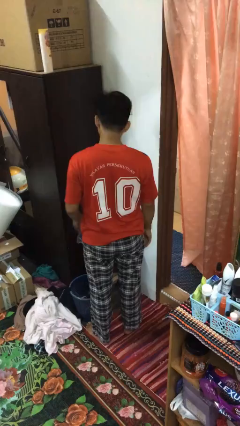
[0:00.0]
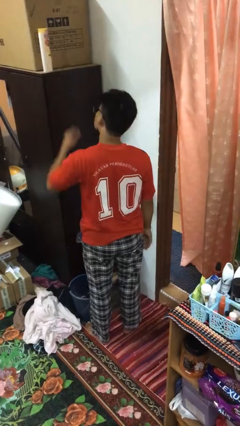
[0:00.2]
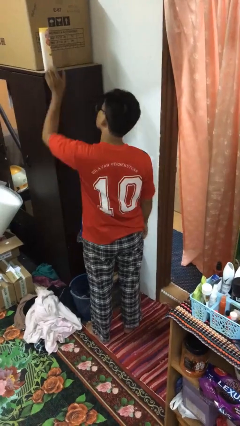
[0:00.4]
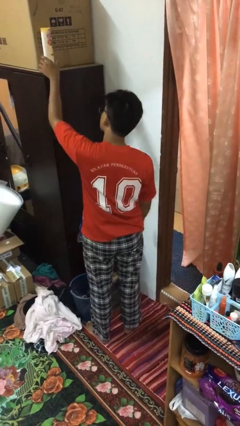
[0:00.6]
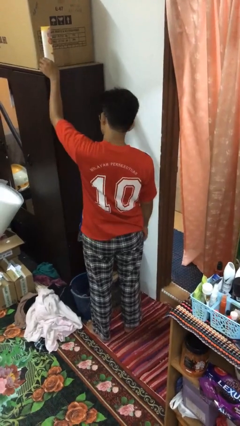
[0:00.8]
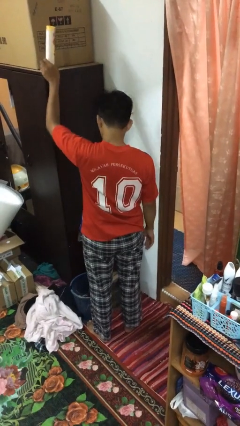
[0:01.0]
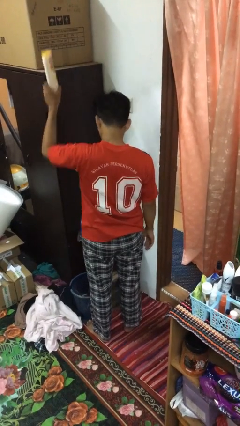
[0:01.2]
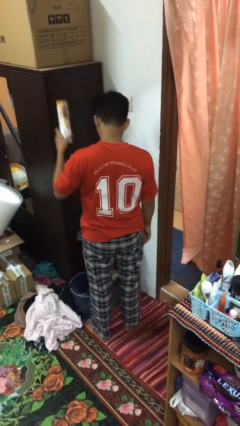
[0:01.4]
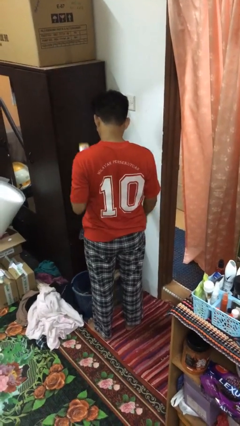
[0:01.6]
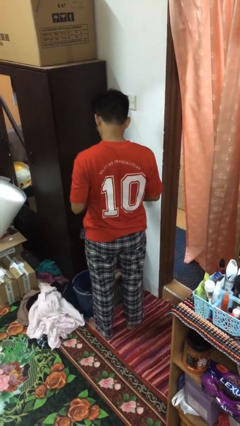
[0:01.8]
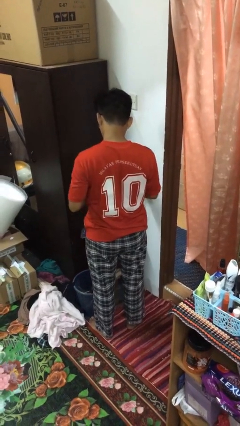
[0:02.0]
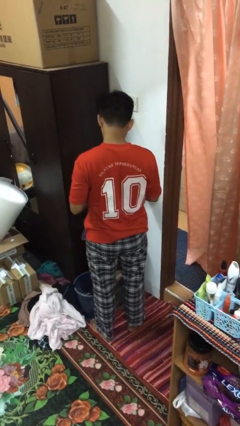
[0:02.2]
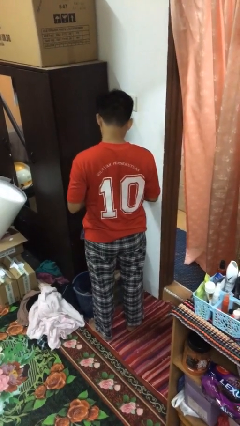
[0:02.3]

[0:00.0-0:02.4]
person picks up object from shelf

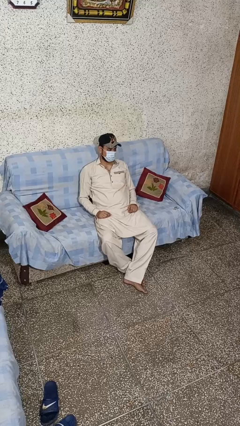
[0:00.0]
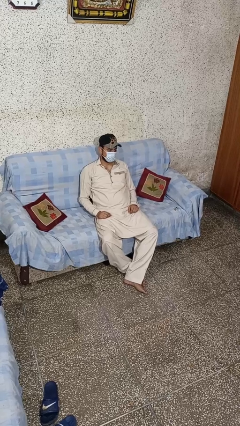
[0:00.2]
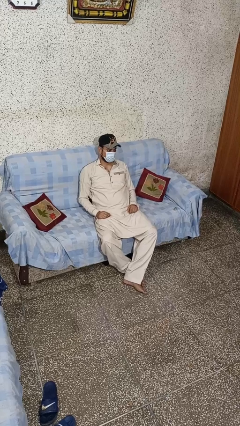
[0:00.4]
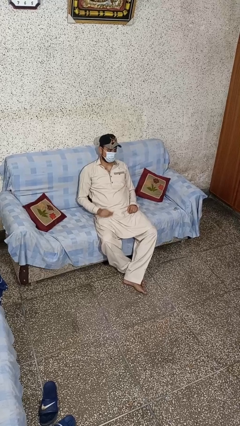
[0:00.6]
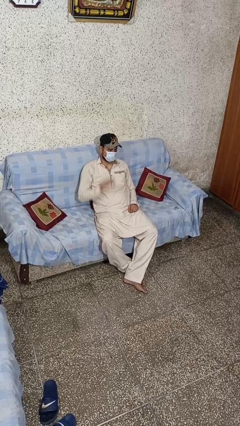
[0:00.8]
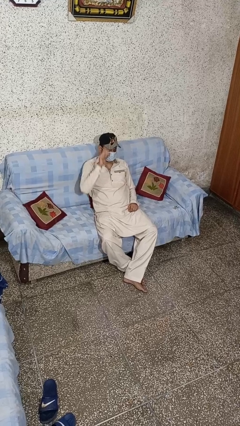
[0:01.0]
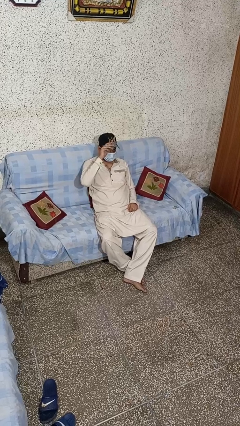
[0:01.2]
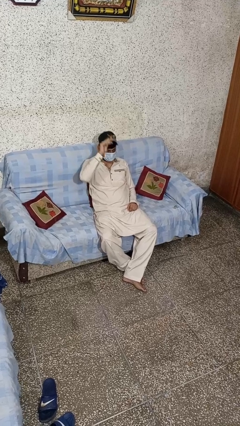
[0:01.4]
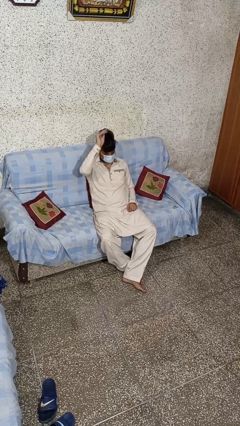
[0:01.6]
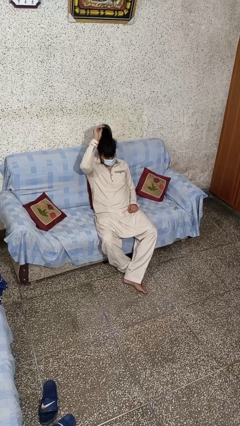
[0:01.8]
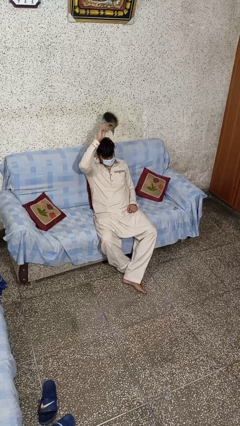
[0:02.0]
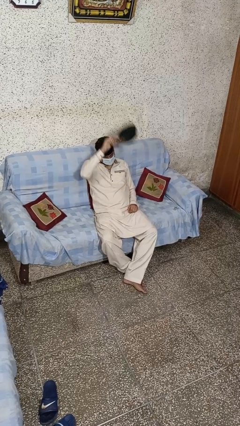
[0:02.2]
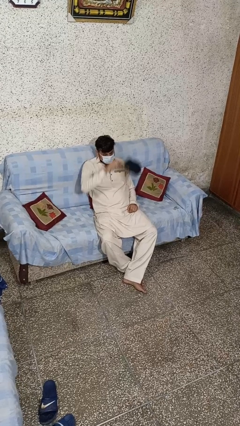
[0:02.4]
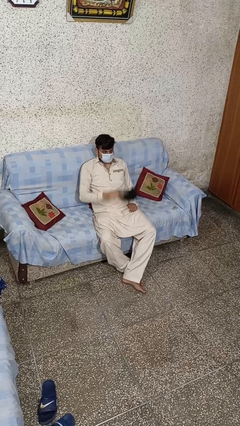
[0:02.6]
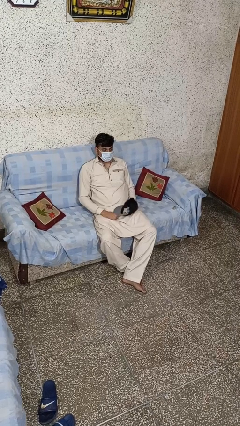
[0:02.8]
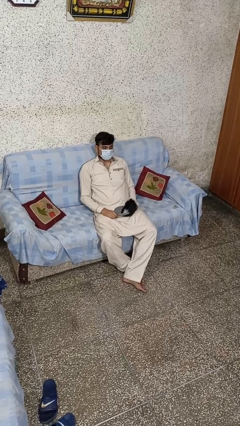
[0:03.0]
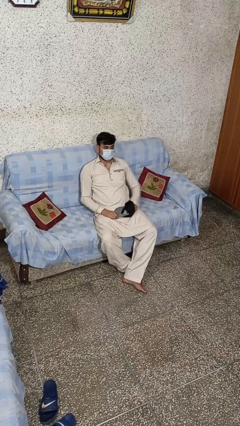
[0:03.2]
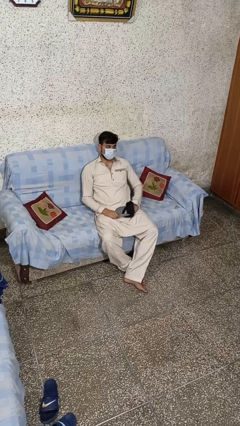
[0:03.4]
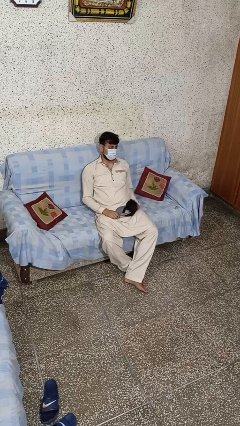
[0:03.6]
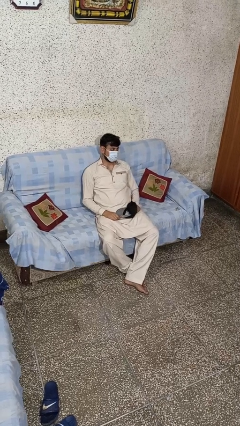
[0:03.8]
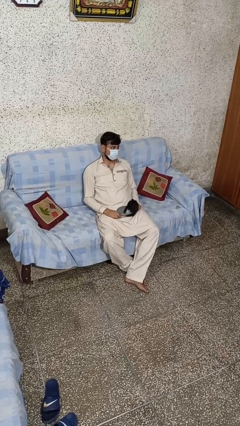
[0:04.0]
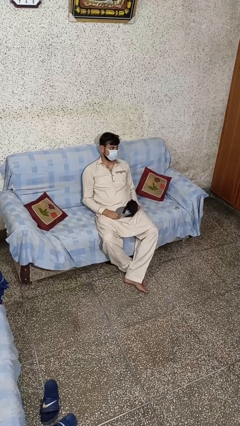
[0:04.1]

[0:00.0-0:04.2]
person takes off hat

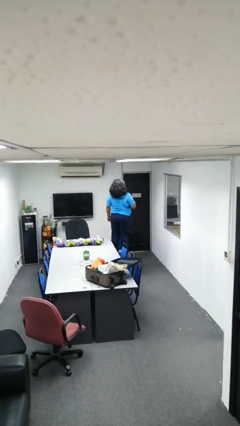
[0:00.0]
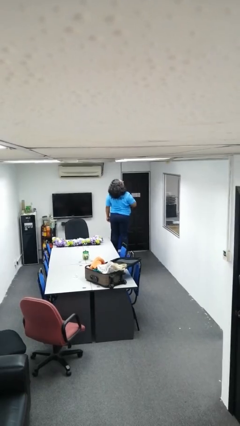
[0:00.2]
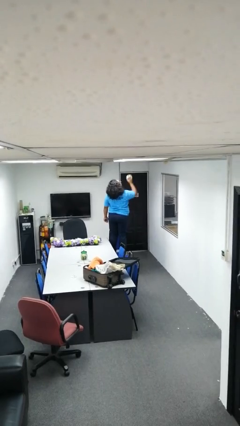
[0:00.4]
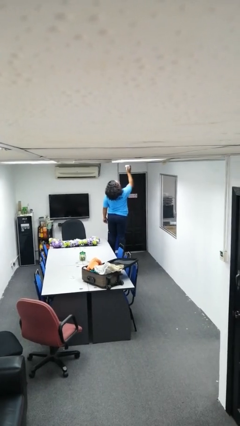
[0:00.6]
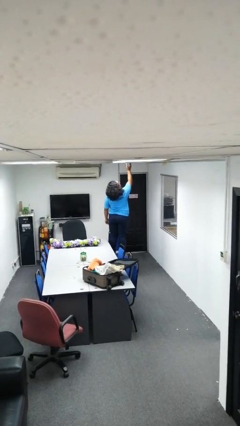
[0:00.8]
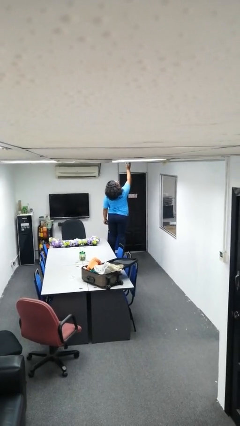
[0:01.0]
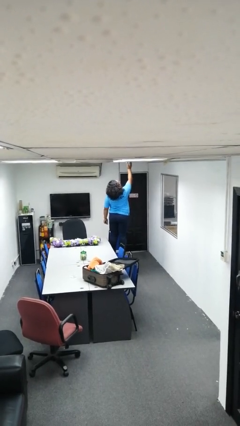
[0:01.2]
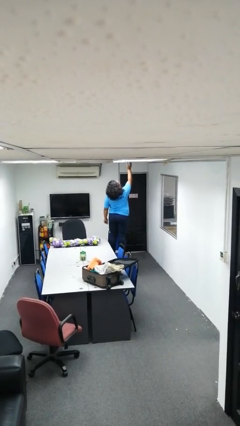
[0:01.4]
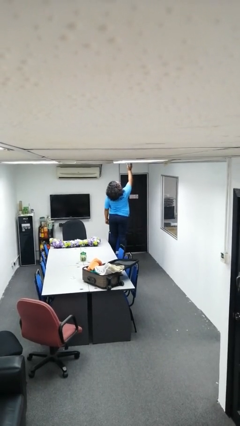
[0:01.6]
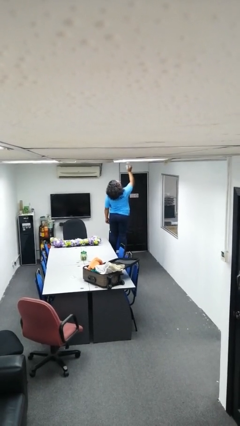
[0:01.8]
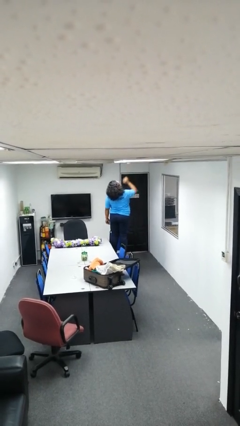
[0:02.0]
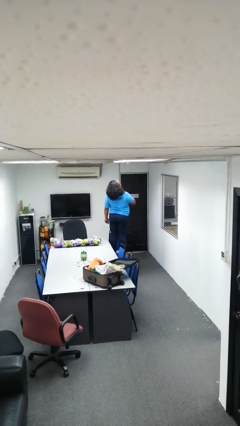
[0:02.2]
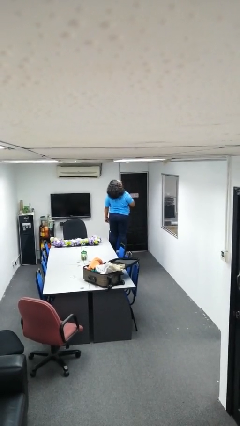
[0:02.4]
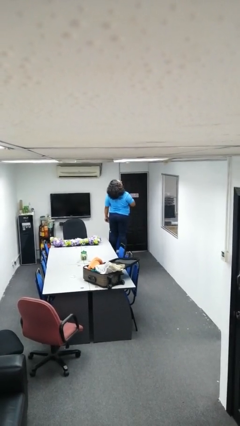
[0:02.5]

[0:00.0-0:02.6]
person puts up smoke detector

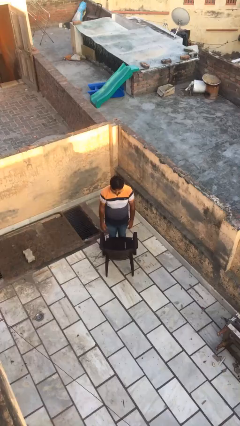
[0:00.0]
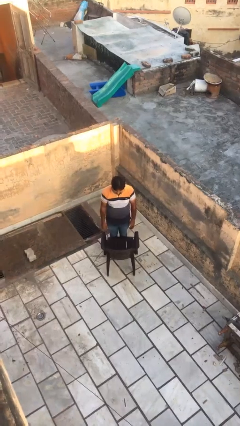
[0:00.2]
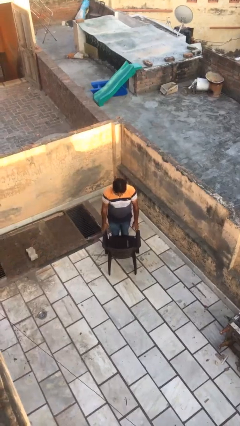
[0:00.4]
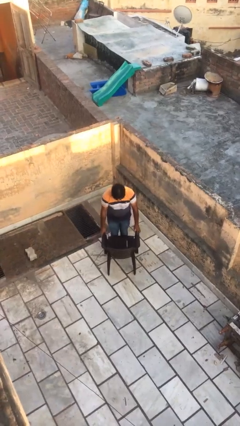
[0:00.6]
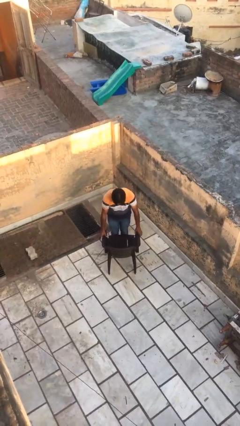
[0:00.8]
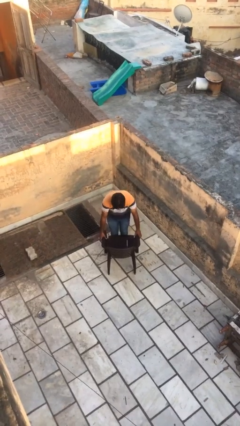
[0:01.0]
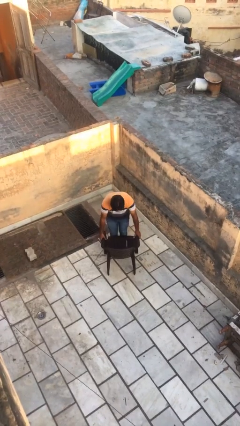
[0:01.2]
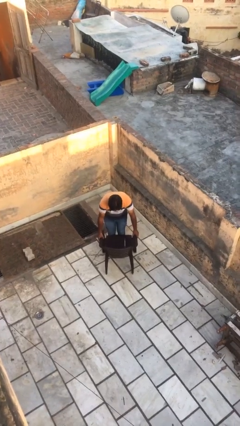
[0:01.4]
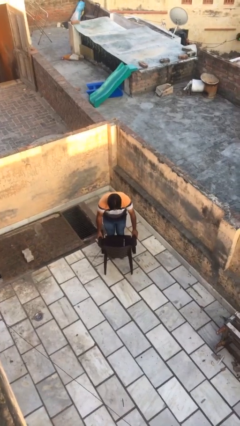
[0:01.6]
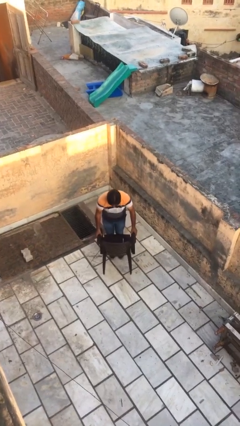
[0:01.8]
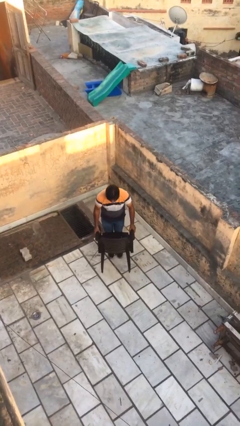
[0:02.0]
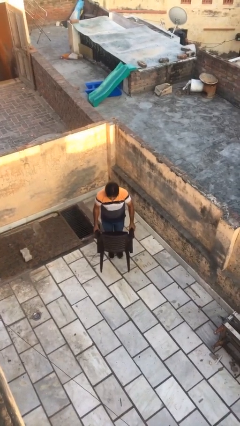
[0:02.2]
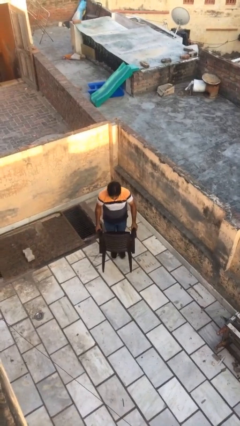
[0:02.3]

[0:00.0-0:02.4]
person picks up object from floor

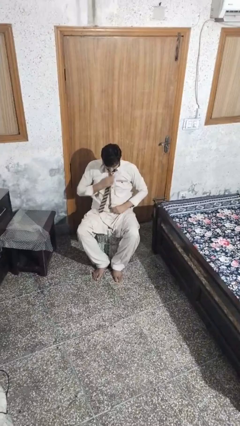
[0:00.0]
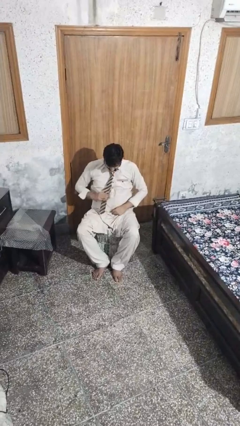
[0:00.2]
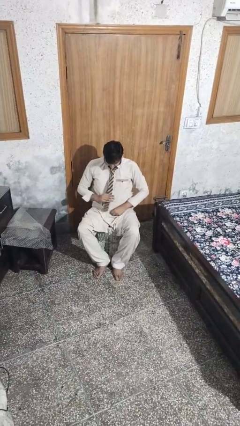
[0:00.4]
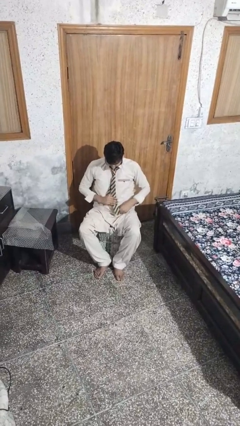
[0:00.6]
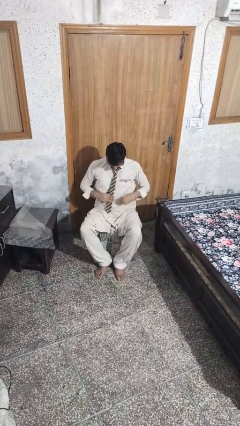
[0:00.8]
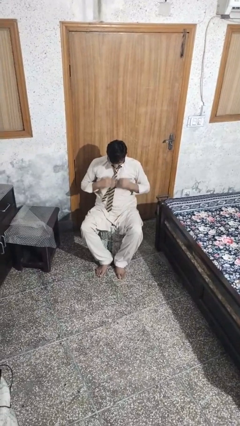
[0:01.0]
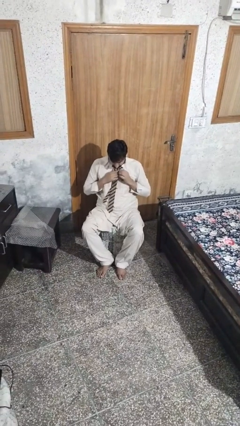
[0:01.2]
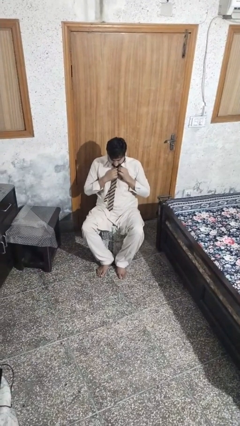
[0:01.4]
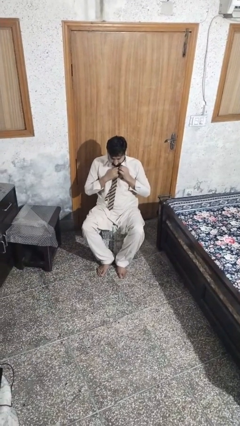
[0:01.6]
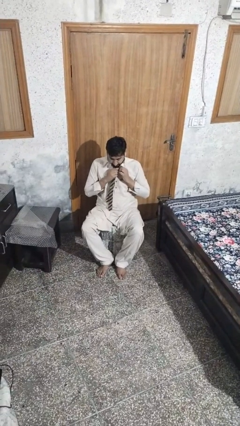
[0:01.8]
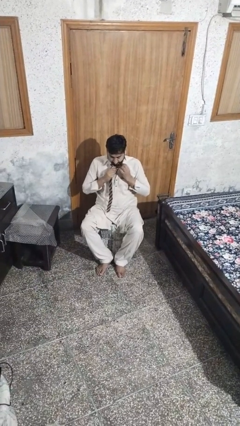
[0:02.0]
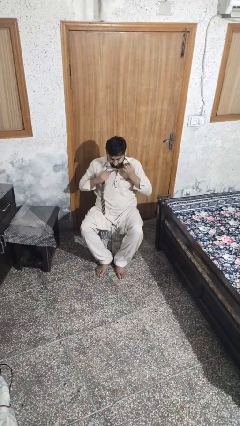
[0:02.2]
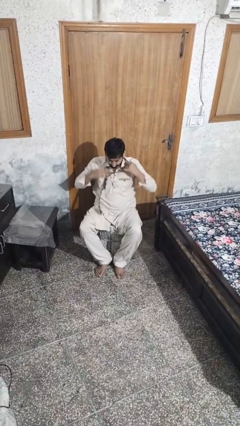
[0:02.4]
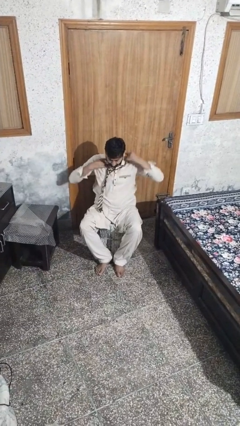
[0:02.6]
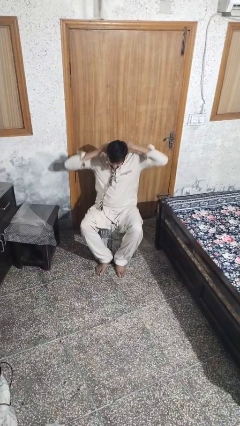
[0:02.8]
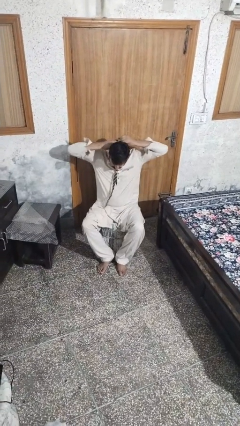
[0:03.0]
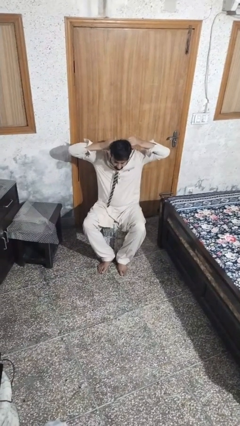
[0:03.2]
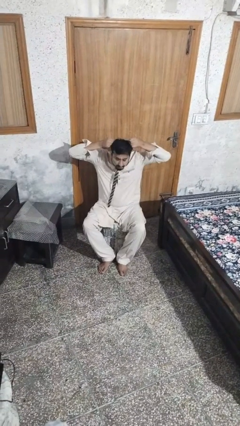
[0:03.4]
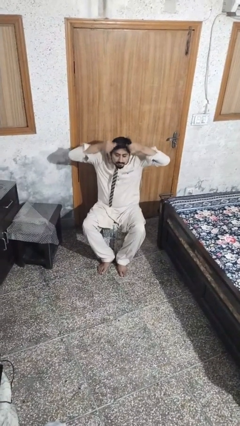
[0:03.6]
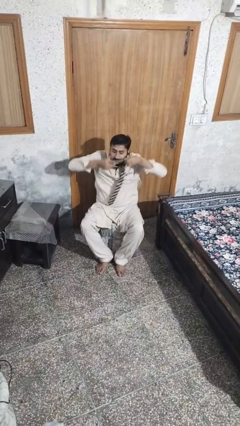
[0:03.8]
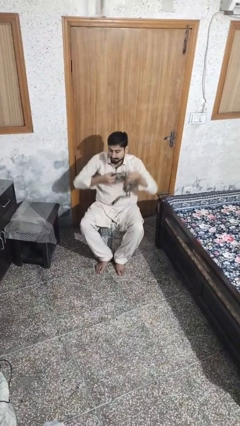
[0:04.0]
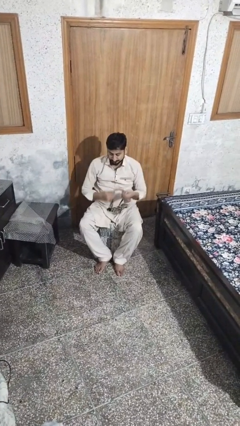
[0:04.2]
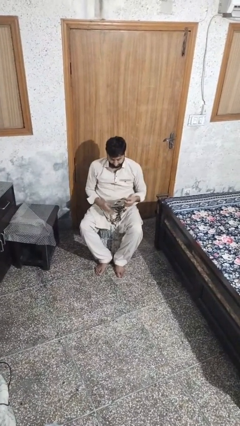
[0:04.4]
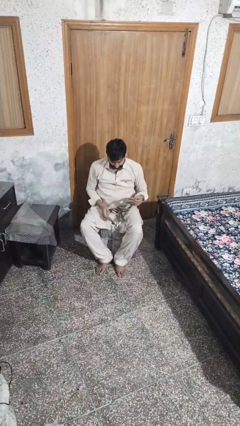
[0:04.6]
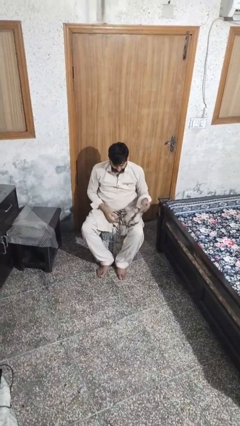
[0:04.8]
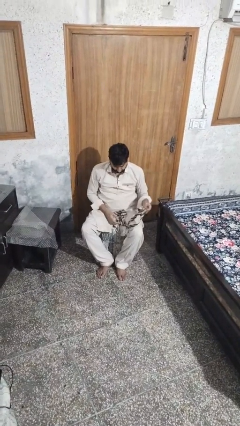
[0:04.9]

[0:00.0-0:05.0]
person takes off necktie

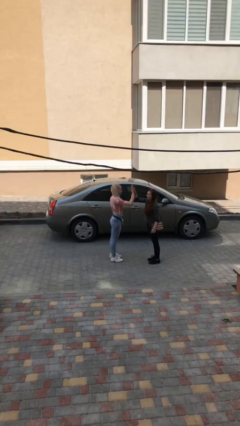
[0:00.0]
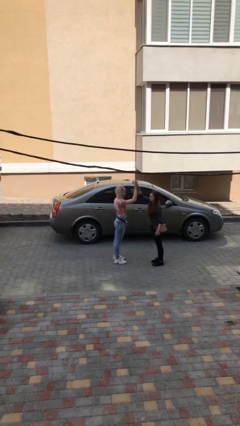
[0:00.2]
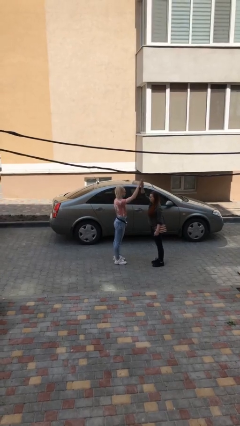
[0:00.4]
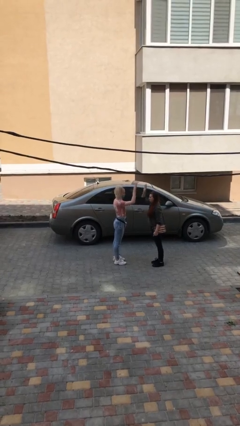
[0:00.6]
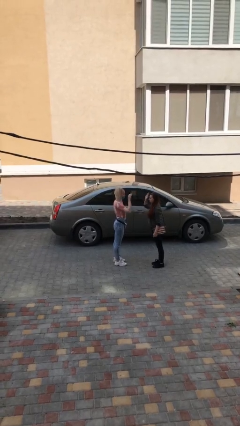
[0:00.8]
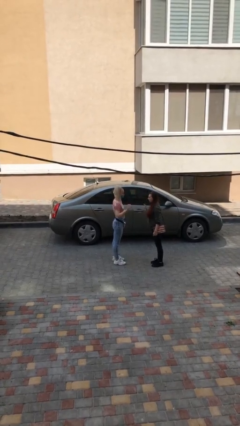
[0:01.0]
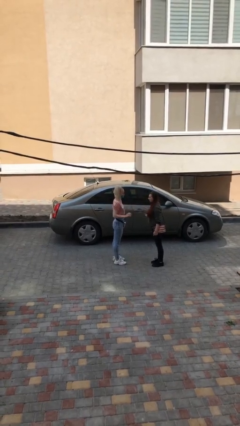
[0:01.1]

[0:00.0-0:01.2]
person highfives hand
